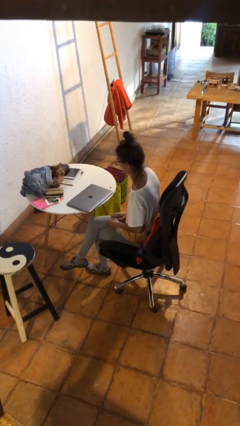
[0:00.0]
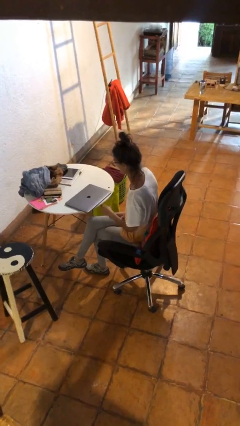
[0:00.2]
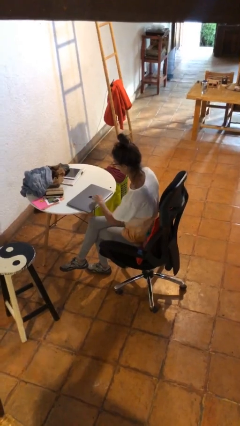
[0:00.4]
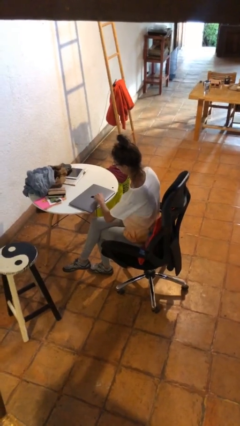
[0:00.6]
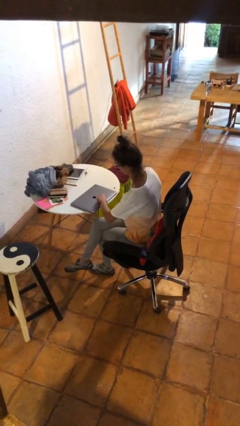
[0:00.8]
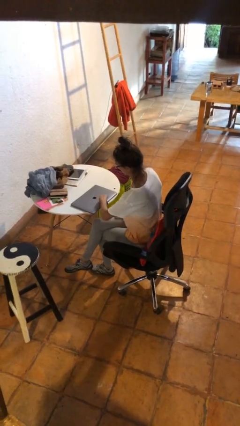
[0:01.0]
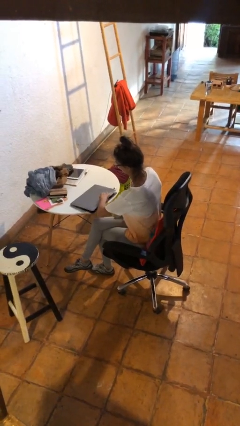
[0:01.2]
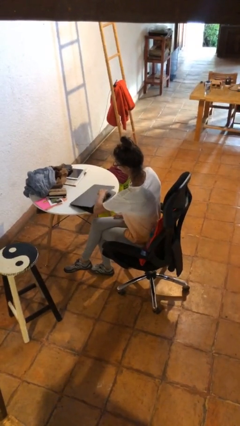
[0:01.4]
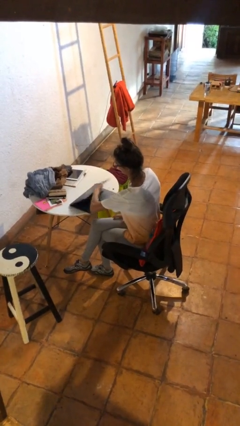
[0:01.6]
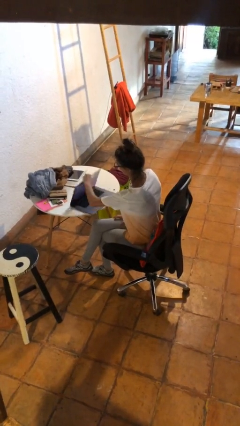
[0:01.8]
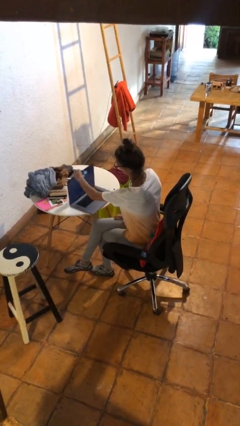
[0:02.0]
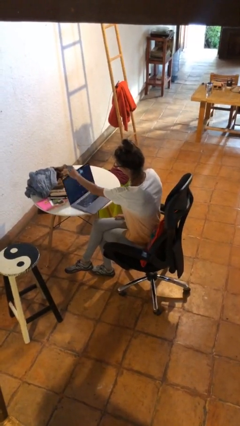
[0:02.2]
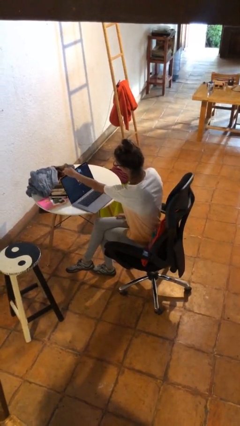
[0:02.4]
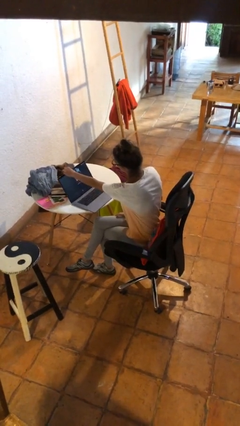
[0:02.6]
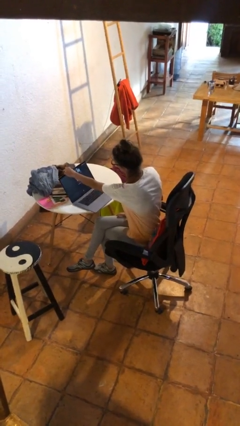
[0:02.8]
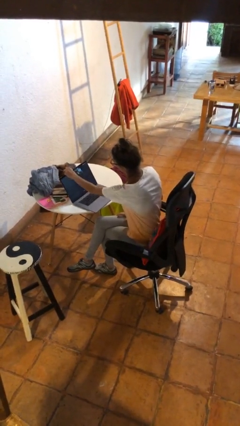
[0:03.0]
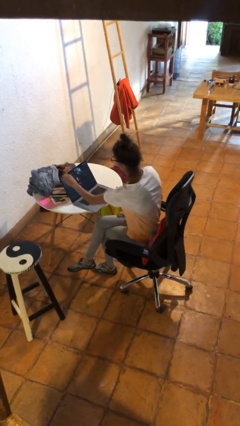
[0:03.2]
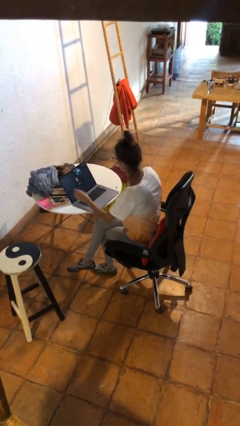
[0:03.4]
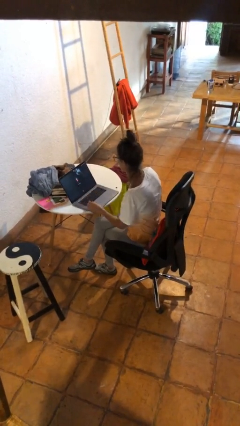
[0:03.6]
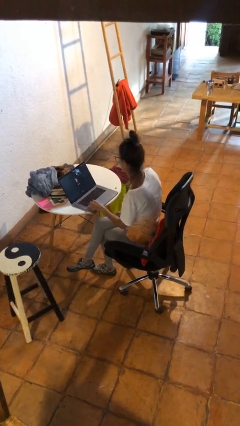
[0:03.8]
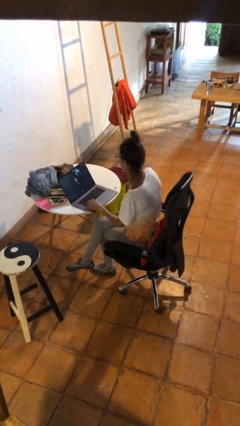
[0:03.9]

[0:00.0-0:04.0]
person opens laptop

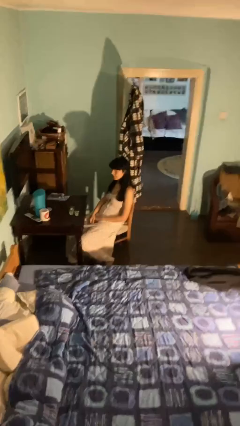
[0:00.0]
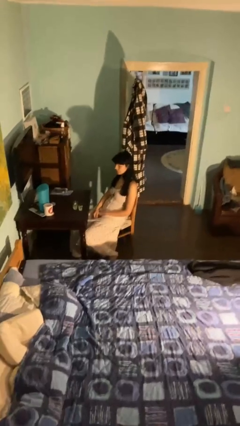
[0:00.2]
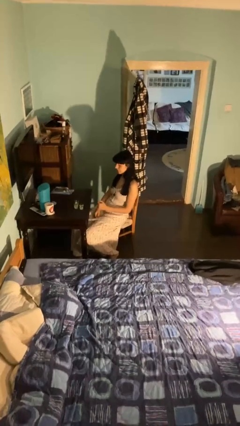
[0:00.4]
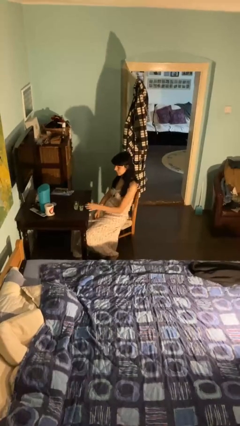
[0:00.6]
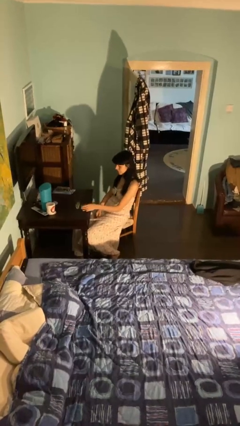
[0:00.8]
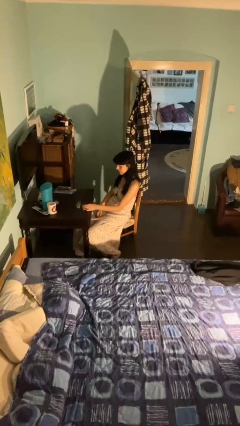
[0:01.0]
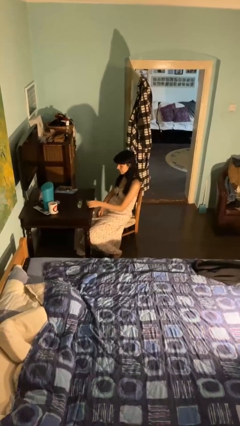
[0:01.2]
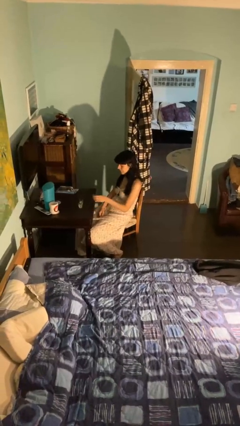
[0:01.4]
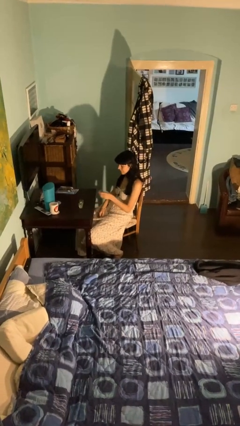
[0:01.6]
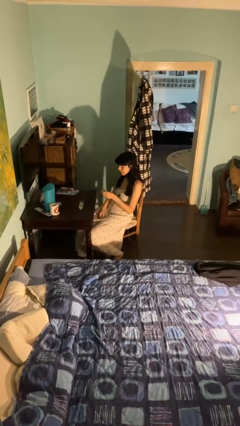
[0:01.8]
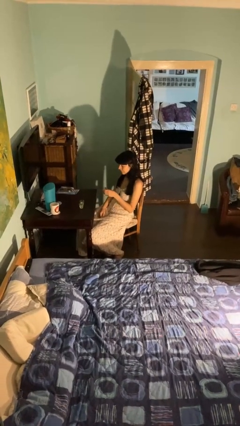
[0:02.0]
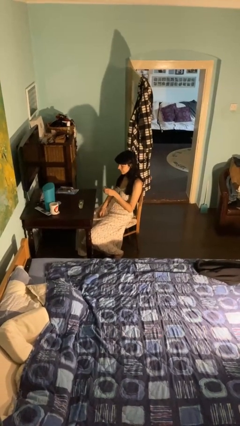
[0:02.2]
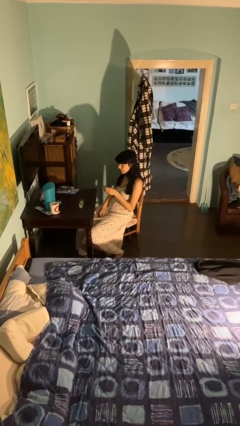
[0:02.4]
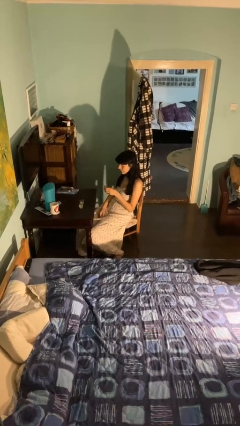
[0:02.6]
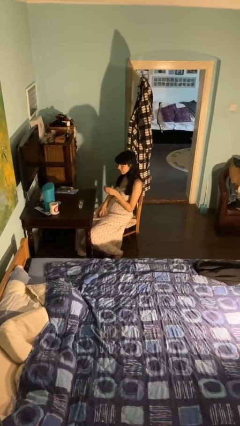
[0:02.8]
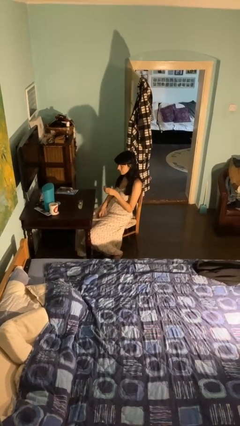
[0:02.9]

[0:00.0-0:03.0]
person picks up object from table

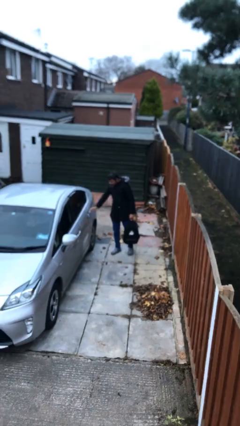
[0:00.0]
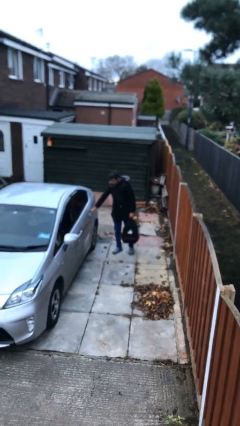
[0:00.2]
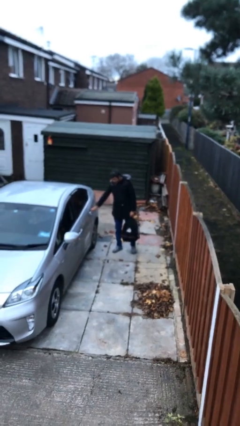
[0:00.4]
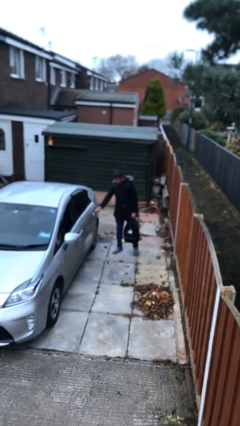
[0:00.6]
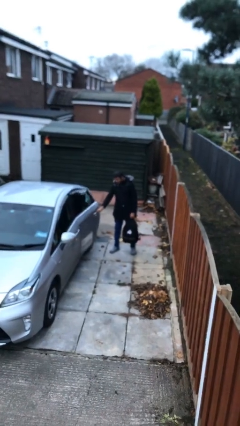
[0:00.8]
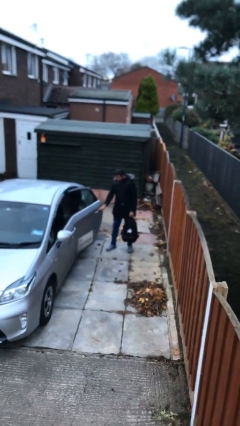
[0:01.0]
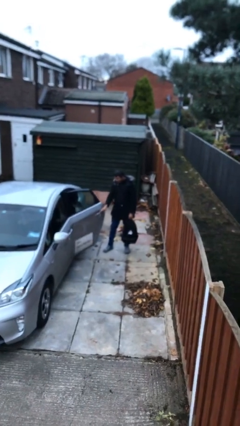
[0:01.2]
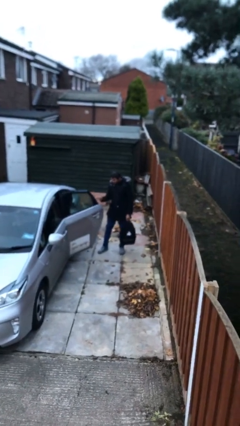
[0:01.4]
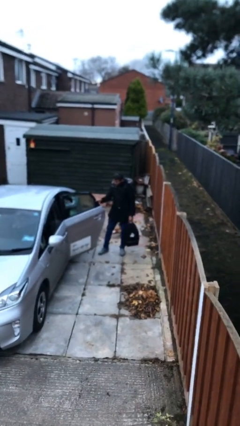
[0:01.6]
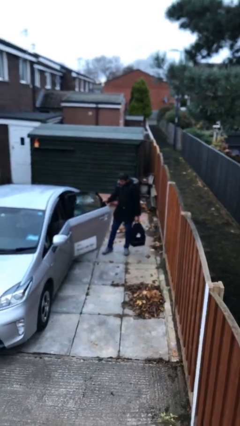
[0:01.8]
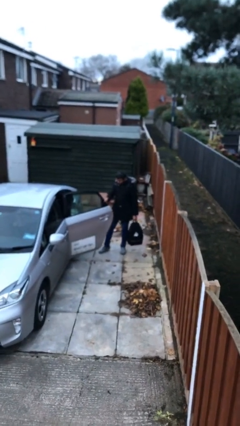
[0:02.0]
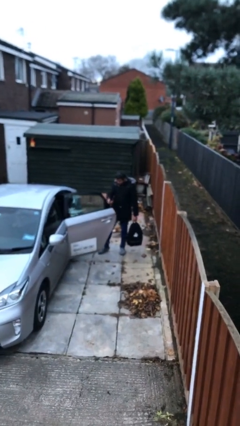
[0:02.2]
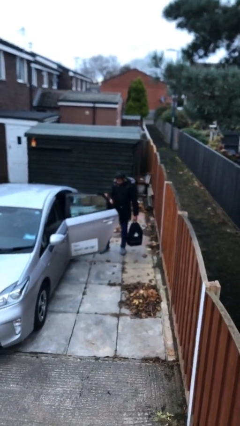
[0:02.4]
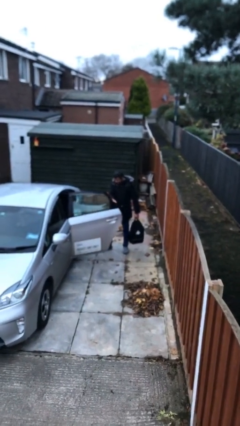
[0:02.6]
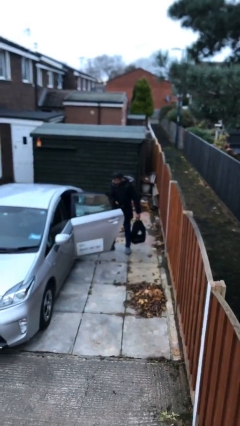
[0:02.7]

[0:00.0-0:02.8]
person opens car door

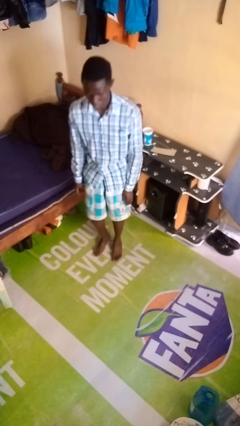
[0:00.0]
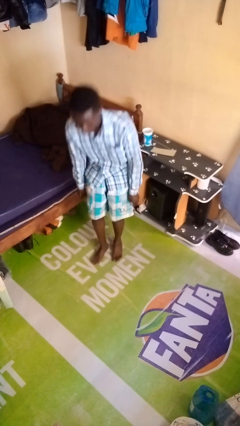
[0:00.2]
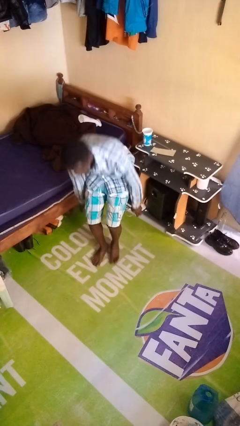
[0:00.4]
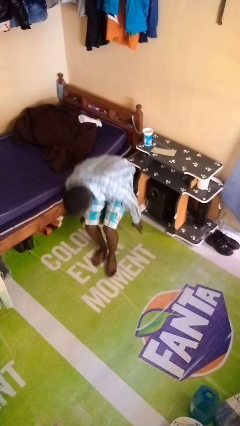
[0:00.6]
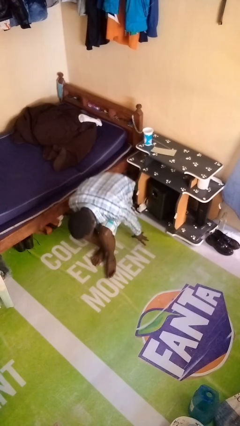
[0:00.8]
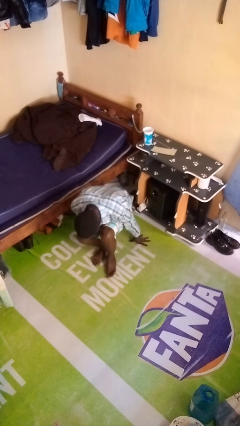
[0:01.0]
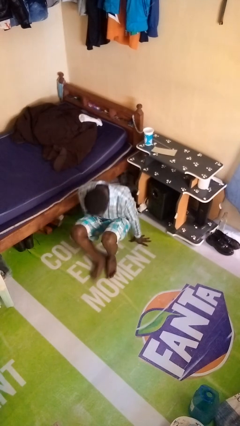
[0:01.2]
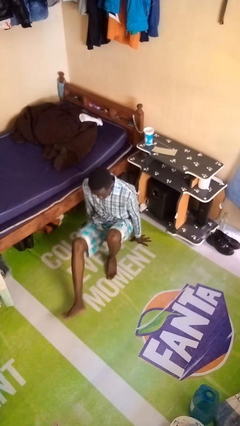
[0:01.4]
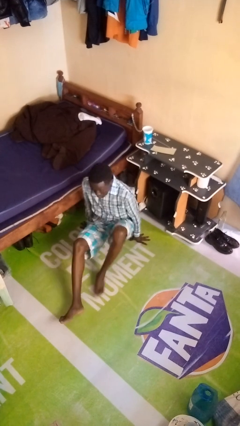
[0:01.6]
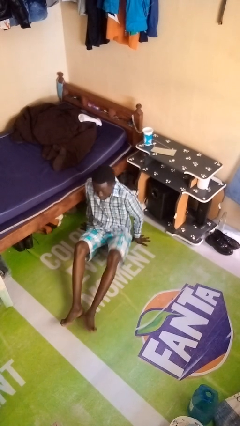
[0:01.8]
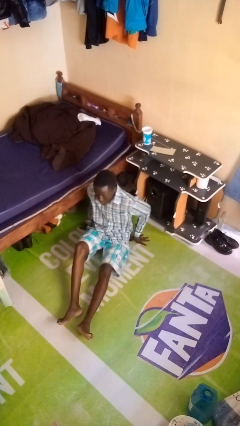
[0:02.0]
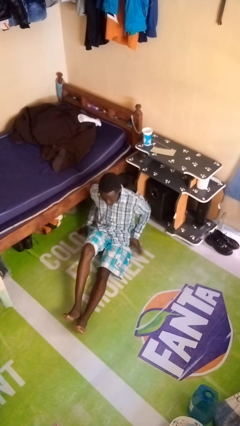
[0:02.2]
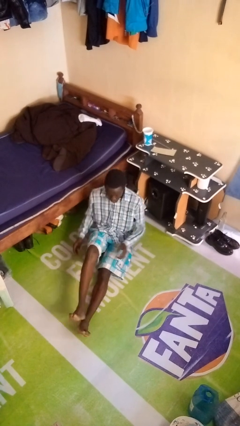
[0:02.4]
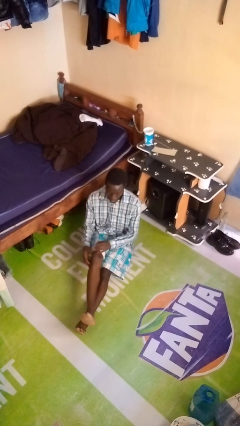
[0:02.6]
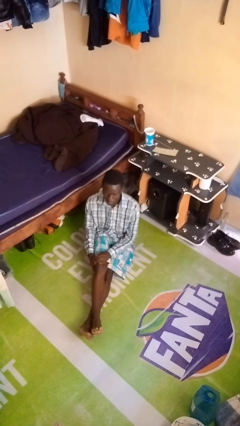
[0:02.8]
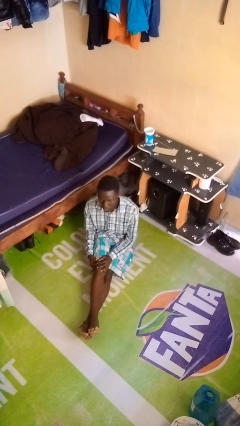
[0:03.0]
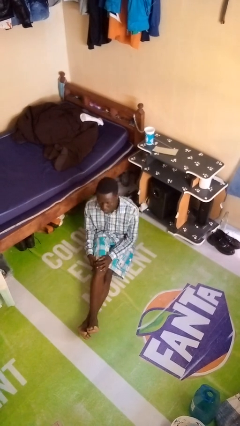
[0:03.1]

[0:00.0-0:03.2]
person sits crisscross

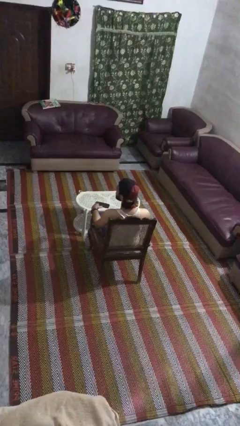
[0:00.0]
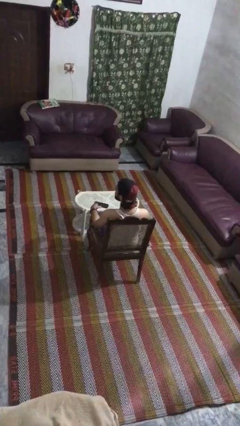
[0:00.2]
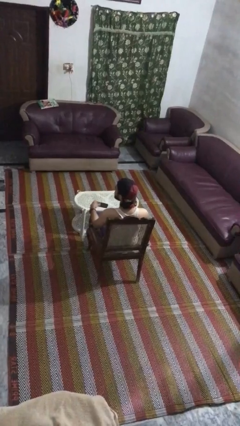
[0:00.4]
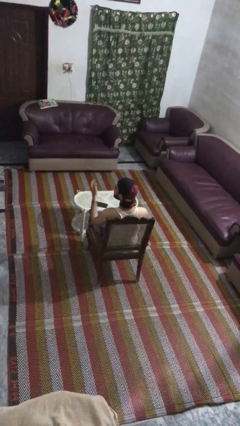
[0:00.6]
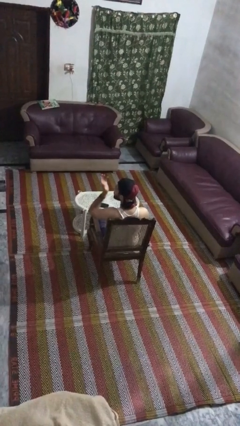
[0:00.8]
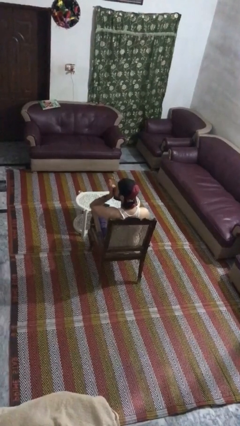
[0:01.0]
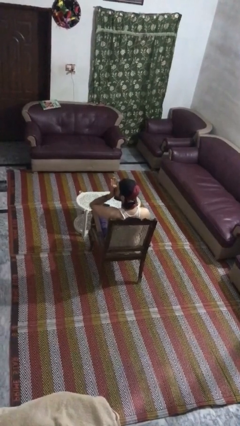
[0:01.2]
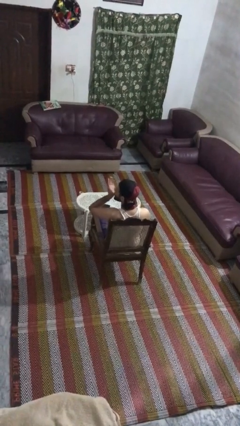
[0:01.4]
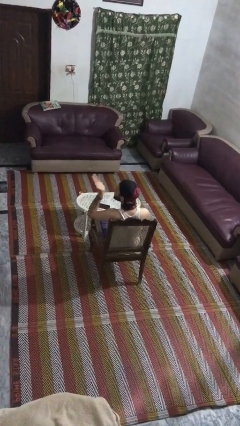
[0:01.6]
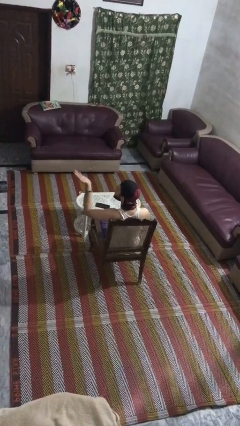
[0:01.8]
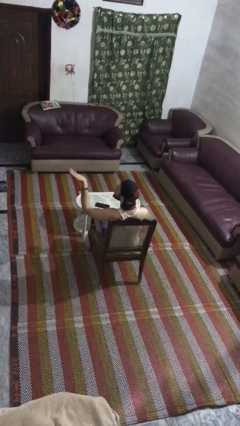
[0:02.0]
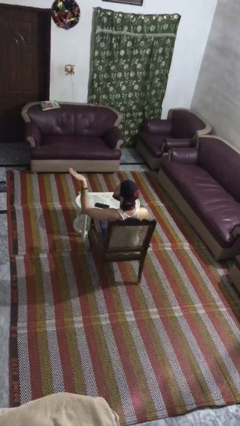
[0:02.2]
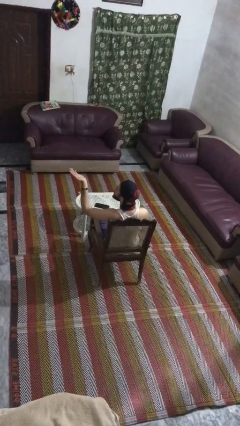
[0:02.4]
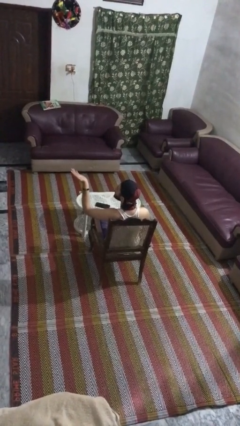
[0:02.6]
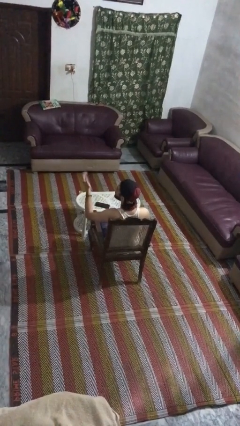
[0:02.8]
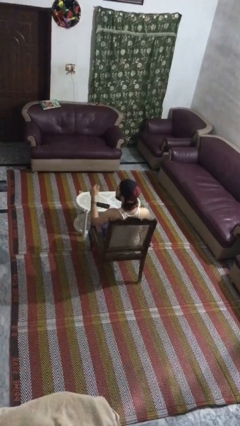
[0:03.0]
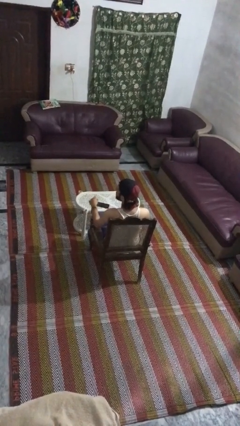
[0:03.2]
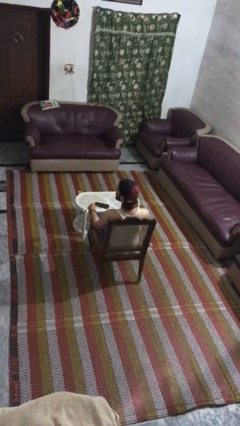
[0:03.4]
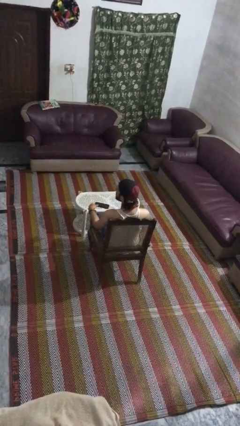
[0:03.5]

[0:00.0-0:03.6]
person gestures blow kiss

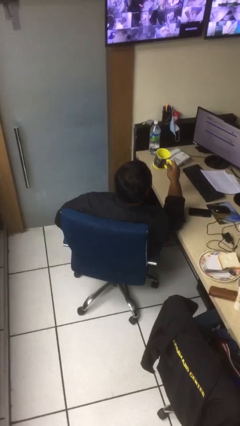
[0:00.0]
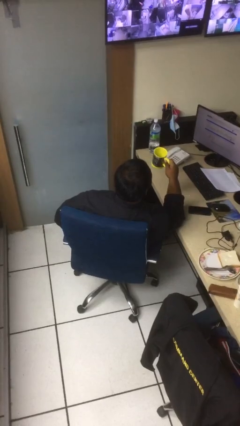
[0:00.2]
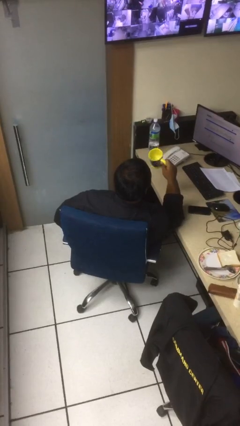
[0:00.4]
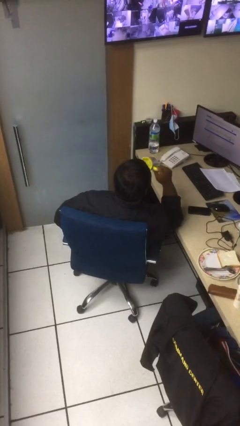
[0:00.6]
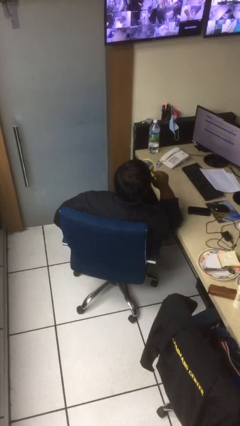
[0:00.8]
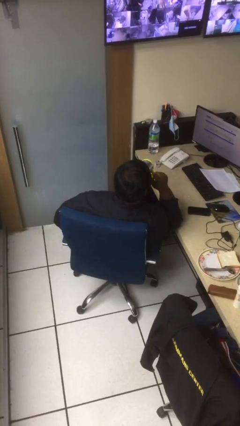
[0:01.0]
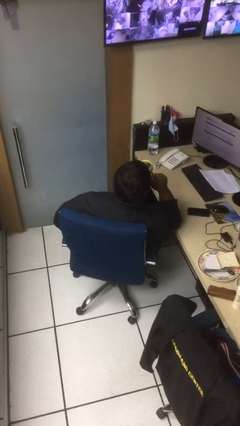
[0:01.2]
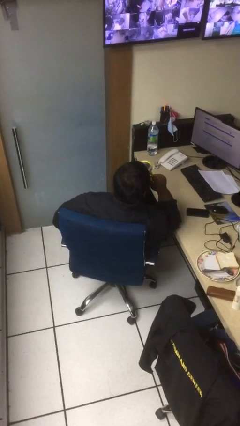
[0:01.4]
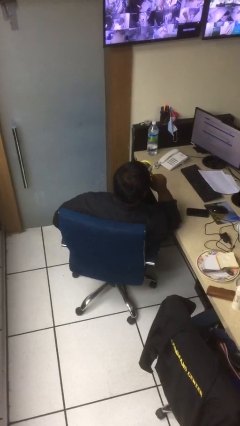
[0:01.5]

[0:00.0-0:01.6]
person drinks from mug
